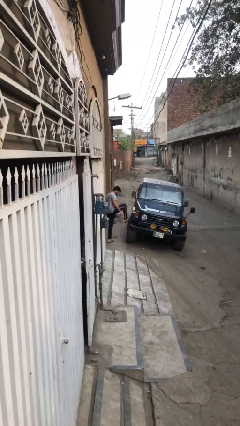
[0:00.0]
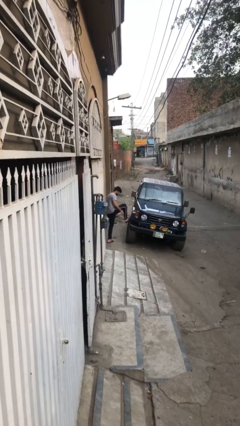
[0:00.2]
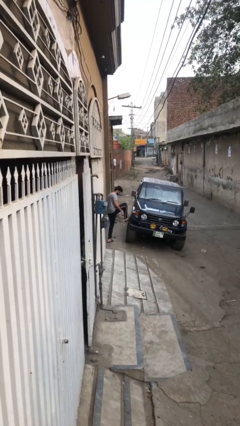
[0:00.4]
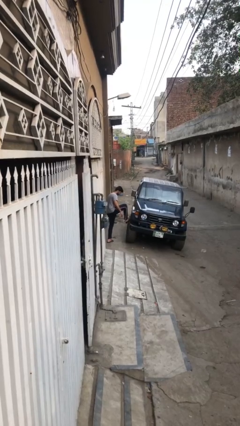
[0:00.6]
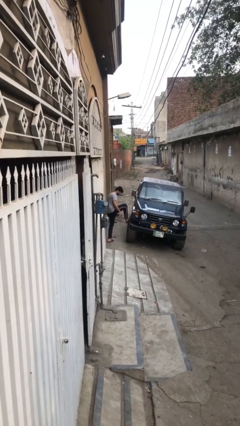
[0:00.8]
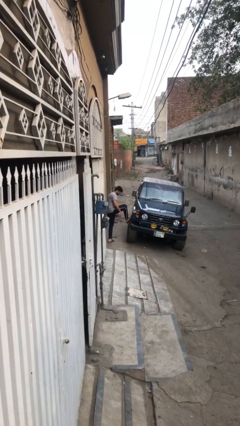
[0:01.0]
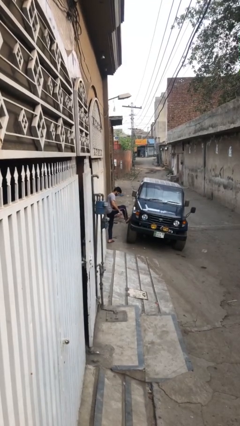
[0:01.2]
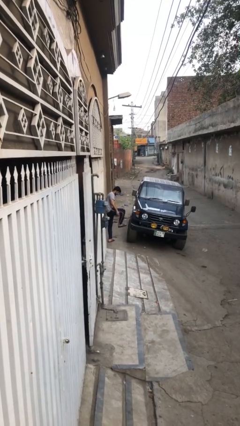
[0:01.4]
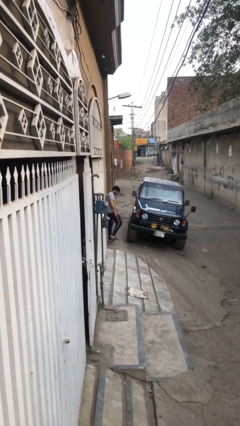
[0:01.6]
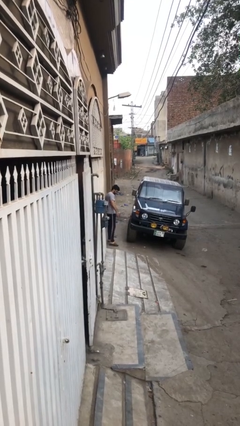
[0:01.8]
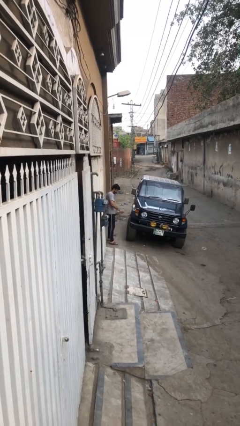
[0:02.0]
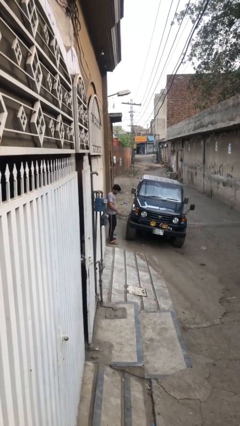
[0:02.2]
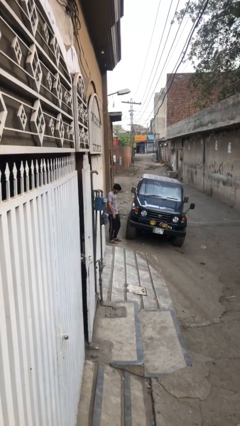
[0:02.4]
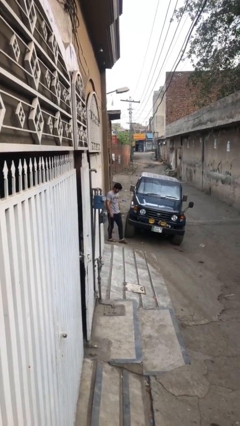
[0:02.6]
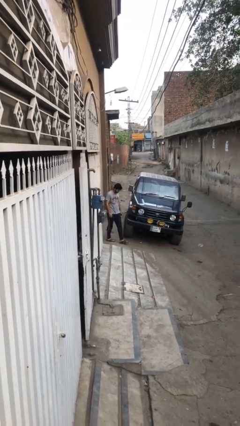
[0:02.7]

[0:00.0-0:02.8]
person kicks car tires

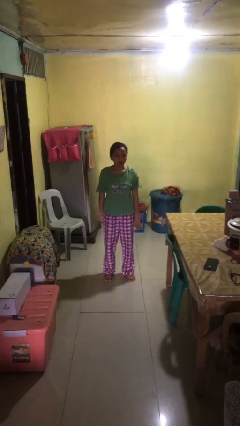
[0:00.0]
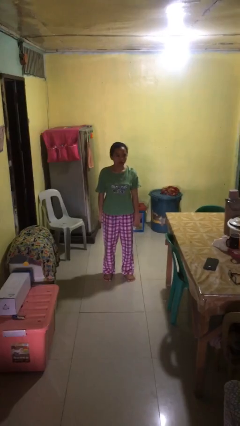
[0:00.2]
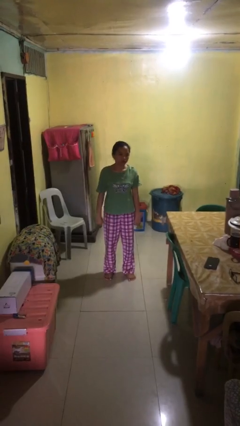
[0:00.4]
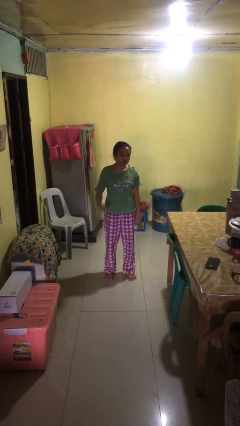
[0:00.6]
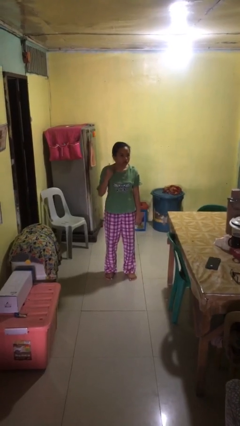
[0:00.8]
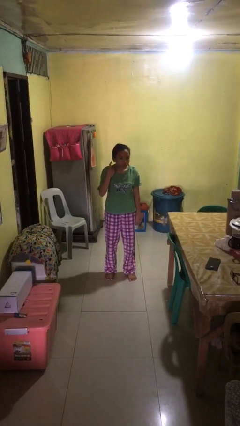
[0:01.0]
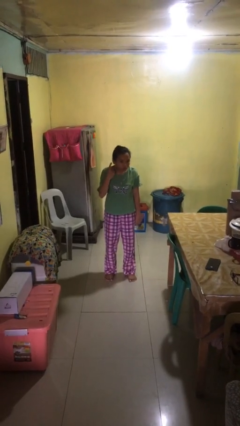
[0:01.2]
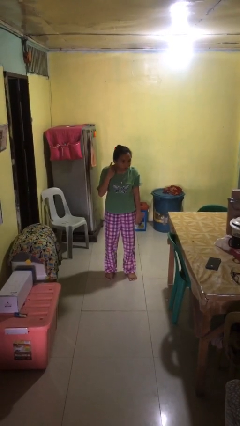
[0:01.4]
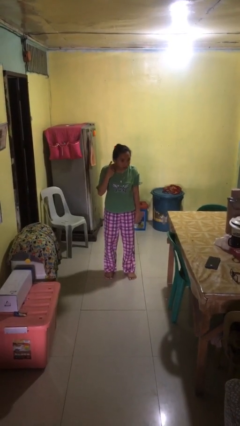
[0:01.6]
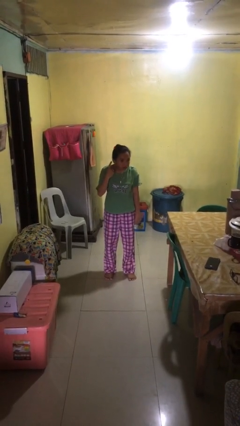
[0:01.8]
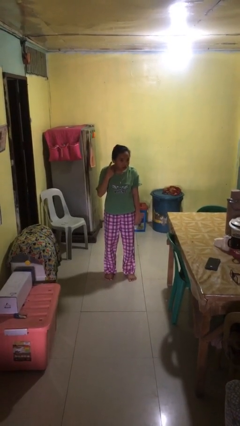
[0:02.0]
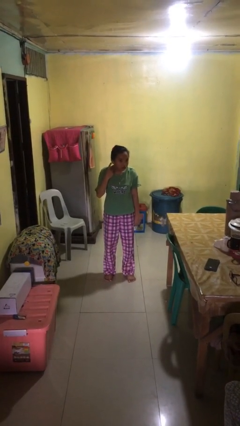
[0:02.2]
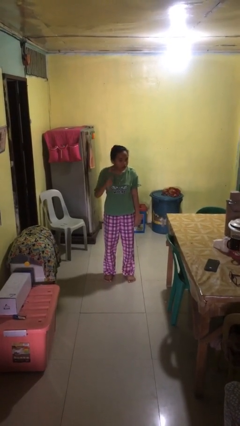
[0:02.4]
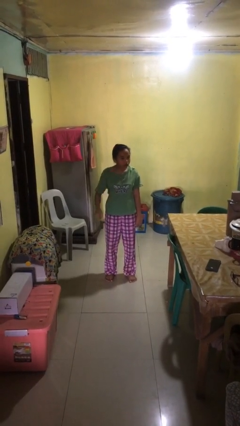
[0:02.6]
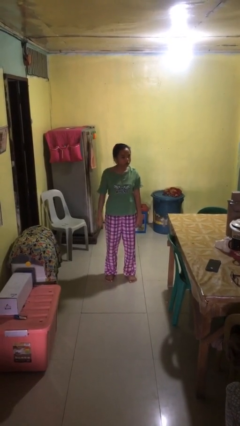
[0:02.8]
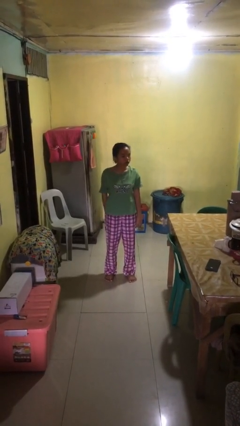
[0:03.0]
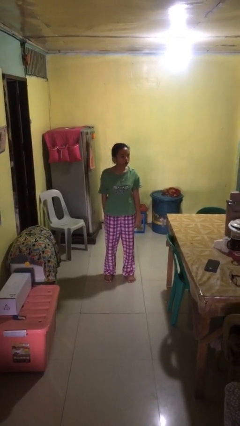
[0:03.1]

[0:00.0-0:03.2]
person gestures listen closely

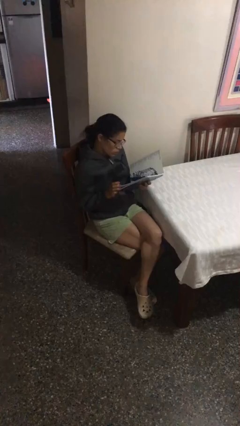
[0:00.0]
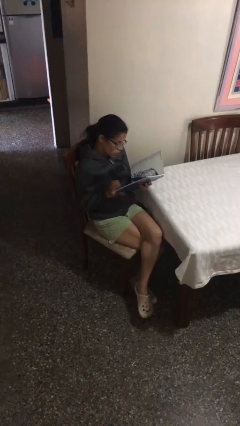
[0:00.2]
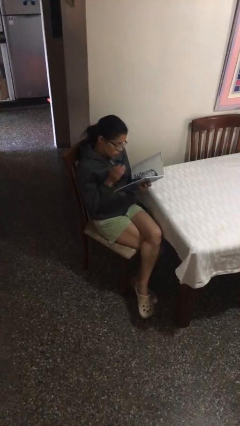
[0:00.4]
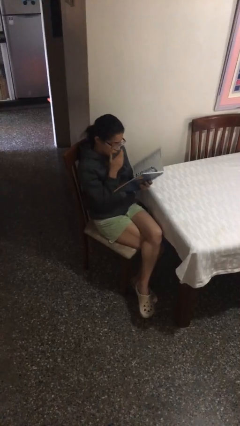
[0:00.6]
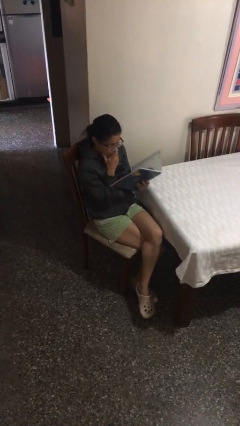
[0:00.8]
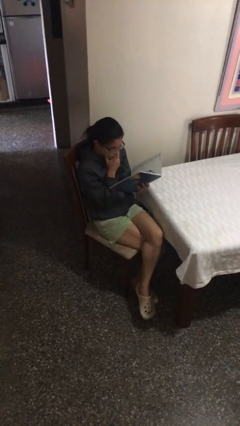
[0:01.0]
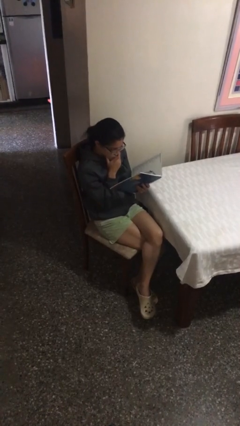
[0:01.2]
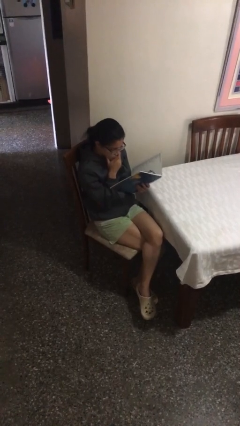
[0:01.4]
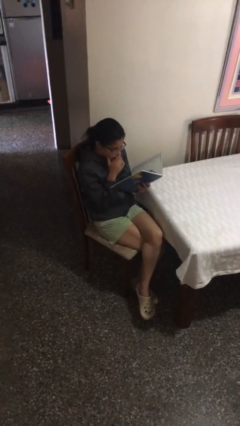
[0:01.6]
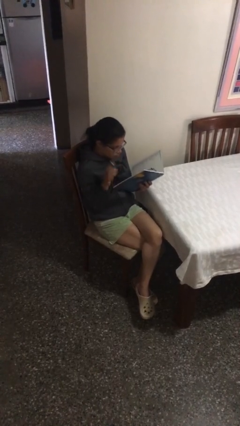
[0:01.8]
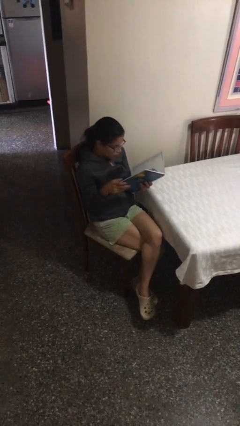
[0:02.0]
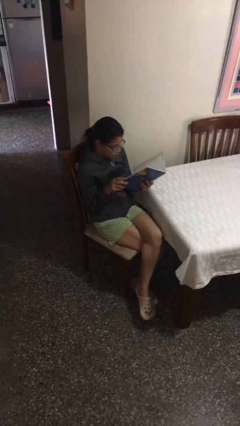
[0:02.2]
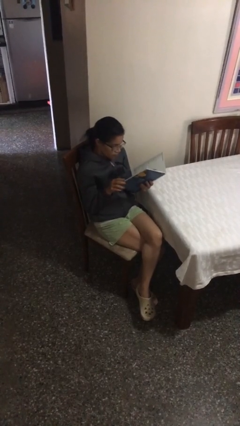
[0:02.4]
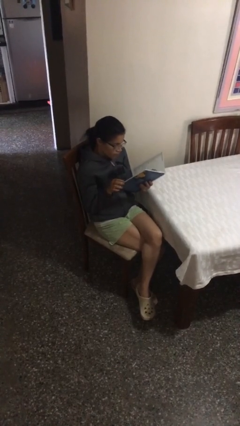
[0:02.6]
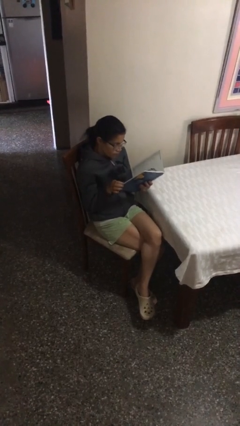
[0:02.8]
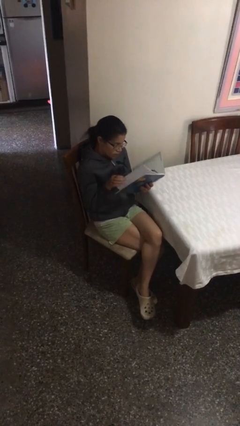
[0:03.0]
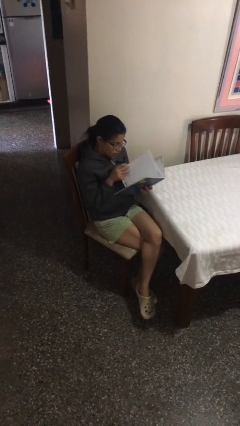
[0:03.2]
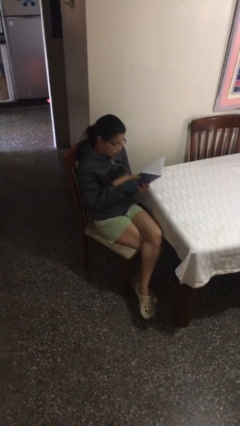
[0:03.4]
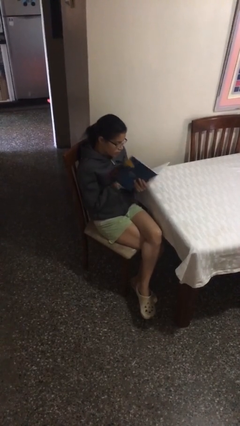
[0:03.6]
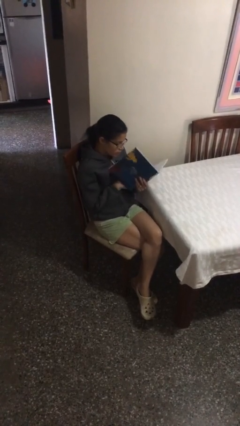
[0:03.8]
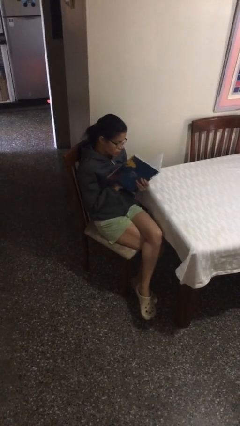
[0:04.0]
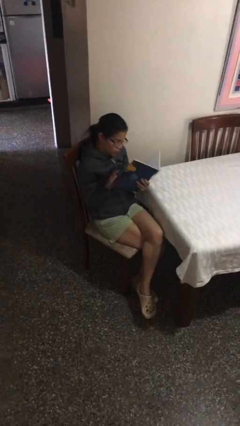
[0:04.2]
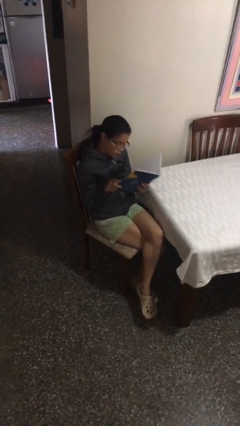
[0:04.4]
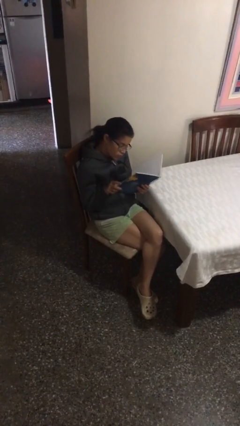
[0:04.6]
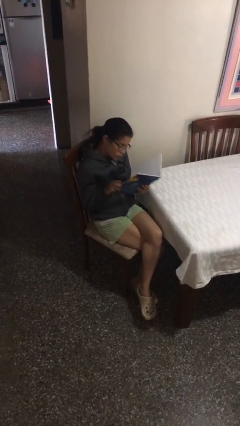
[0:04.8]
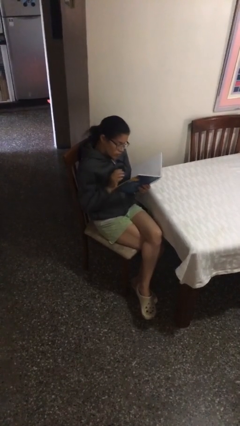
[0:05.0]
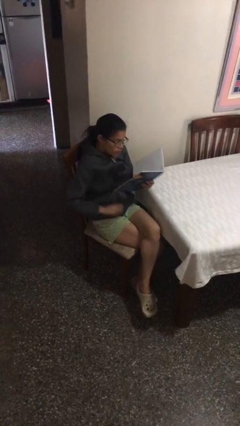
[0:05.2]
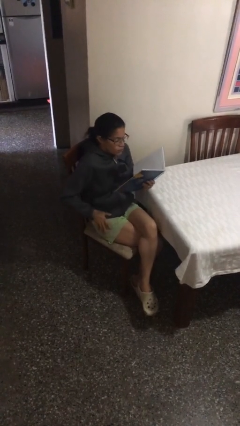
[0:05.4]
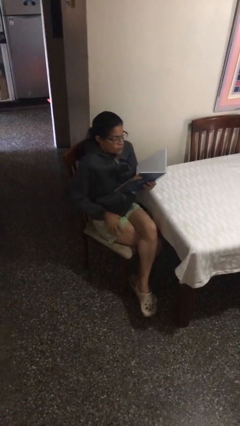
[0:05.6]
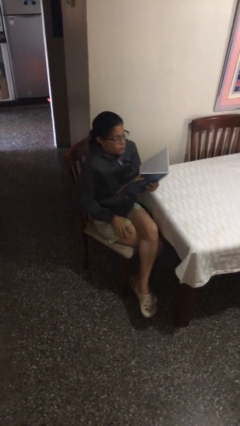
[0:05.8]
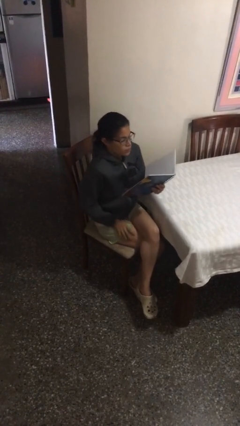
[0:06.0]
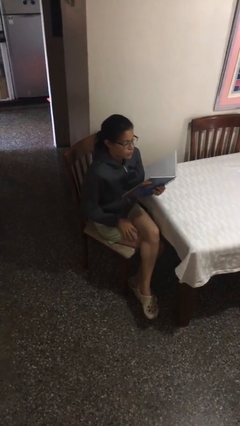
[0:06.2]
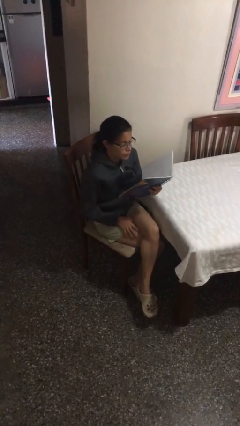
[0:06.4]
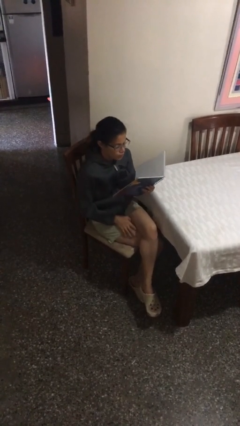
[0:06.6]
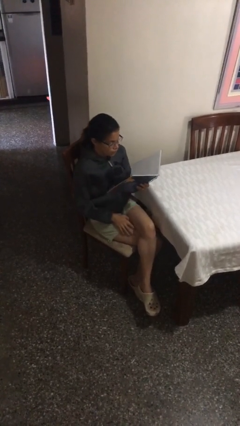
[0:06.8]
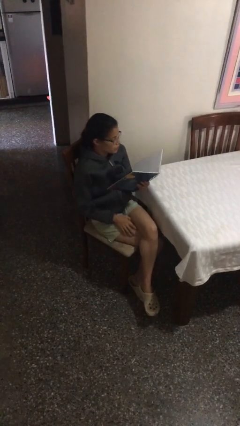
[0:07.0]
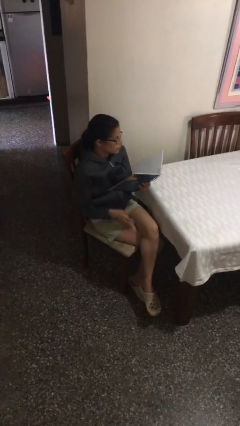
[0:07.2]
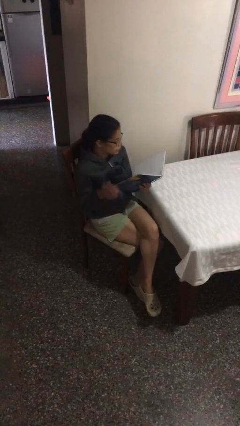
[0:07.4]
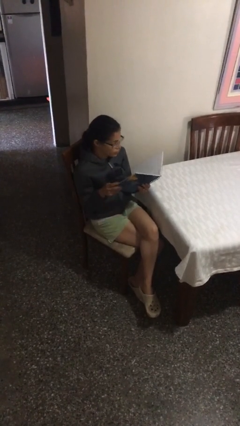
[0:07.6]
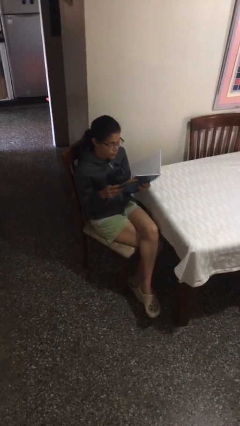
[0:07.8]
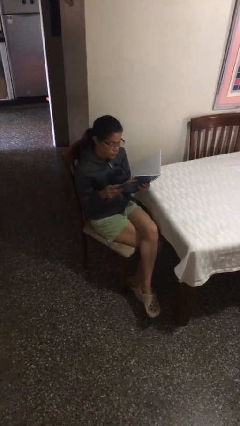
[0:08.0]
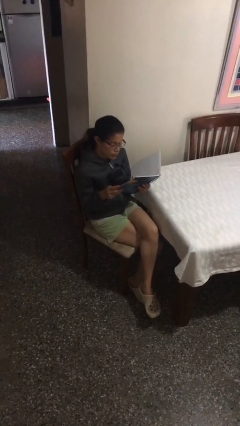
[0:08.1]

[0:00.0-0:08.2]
person reads document

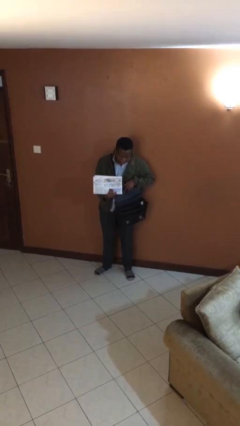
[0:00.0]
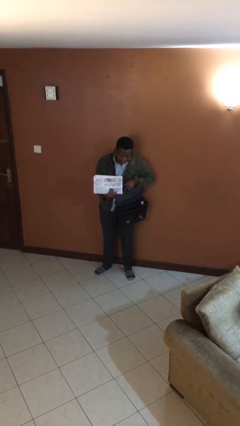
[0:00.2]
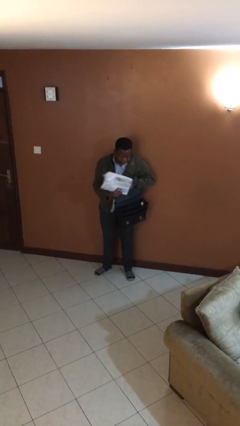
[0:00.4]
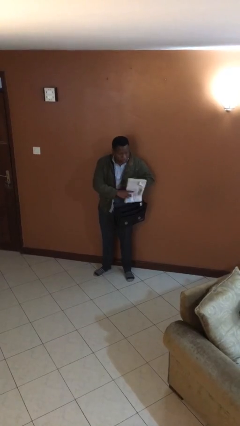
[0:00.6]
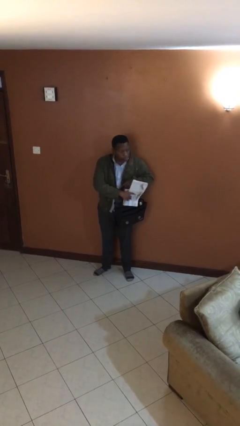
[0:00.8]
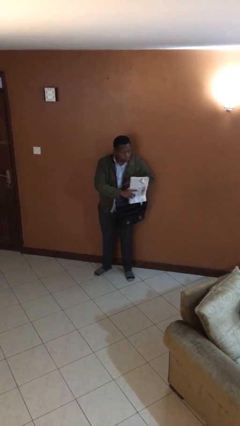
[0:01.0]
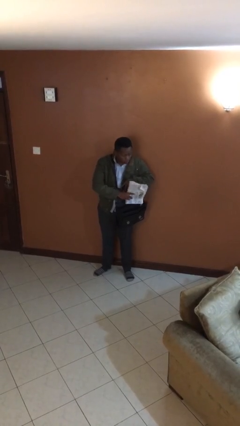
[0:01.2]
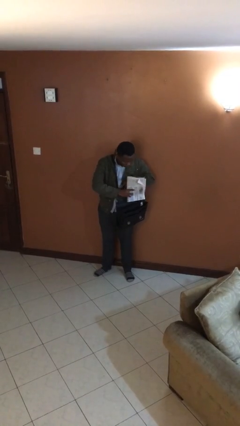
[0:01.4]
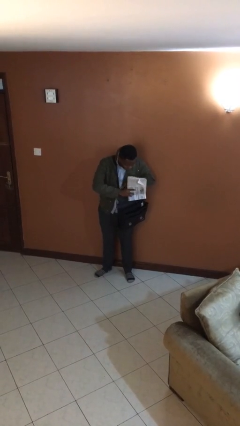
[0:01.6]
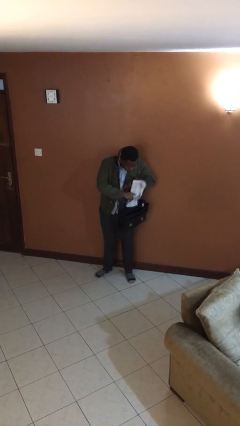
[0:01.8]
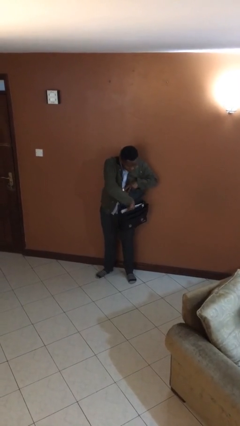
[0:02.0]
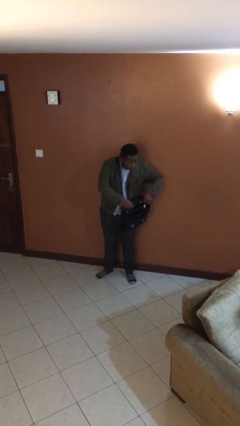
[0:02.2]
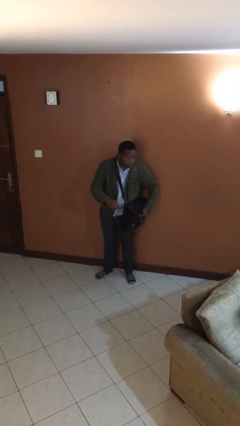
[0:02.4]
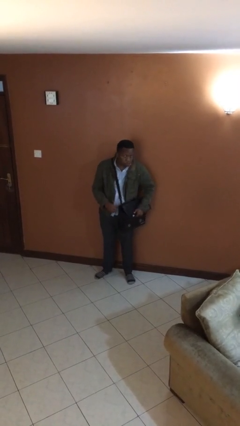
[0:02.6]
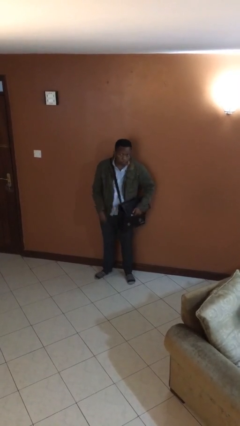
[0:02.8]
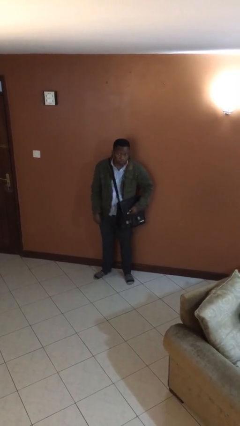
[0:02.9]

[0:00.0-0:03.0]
person puts object into purse

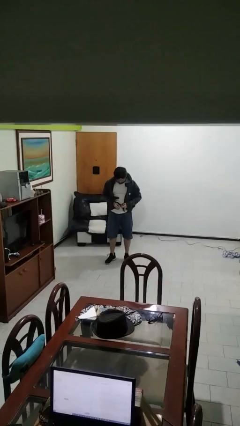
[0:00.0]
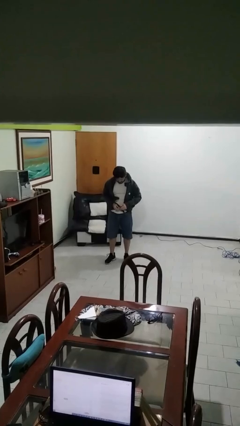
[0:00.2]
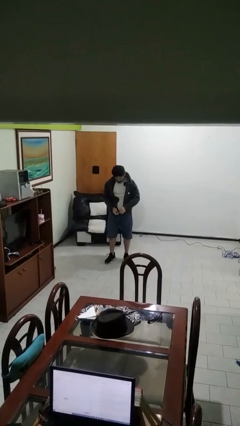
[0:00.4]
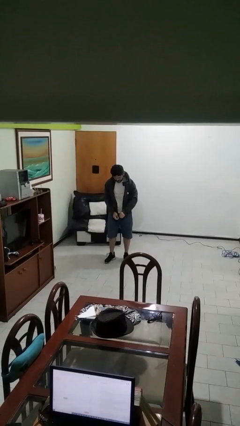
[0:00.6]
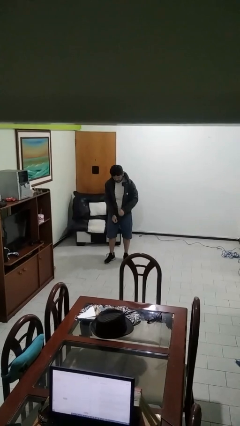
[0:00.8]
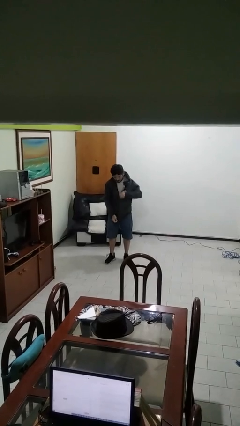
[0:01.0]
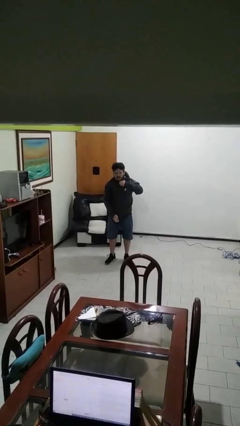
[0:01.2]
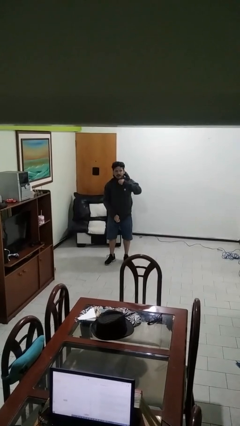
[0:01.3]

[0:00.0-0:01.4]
person zips up jacket
